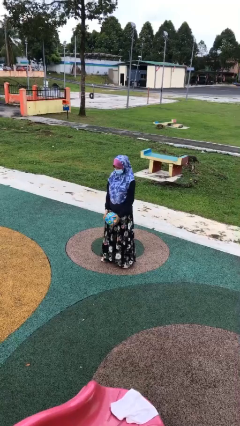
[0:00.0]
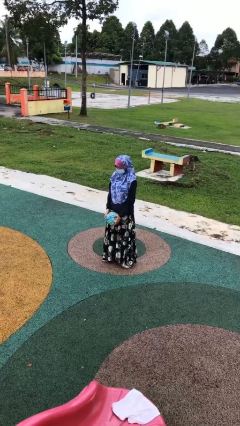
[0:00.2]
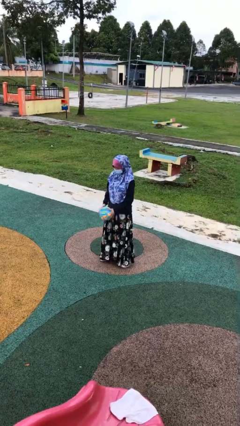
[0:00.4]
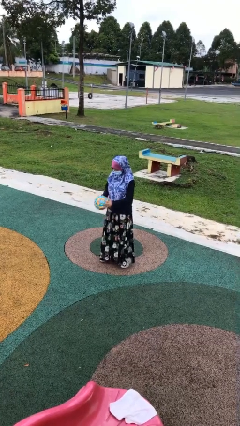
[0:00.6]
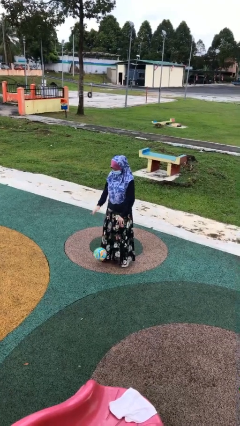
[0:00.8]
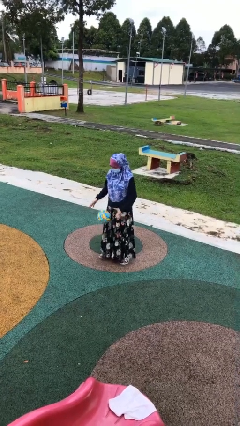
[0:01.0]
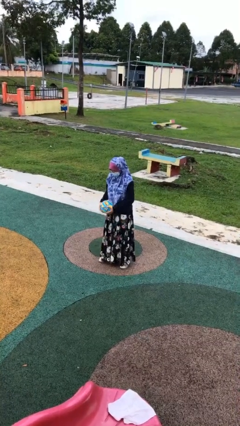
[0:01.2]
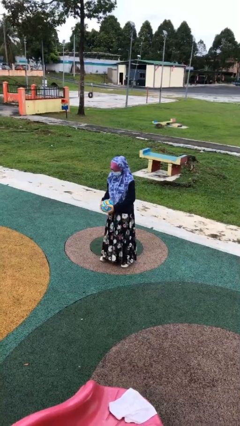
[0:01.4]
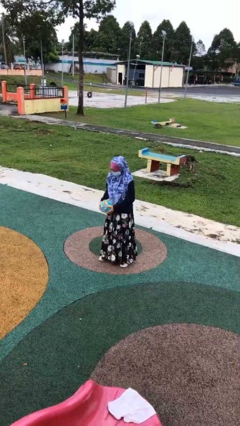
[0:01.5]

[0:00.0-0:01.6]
person bounces ball on floor

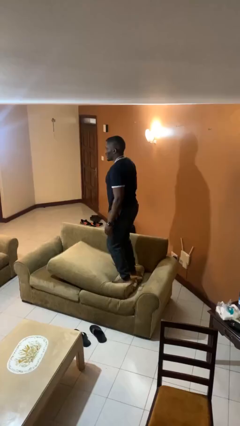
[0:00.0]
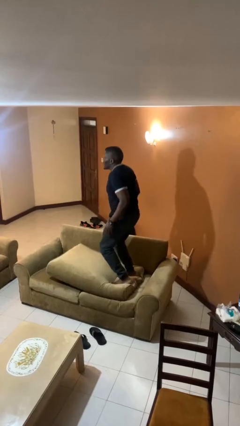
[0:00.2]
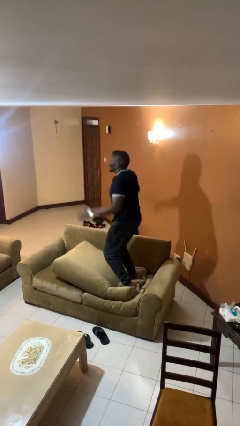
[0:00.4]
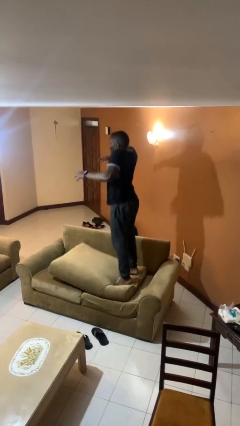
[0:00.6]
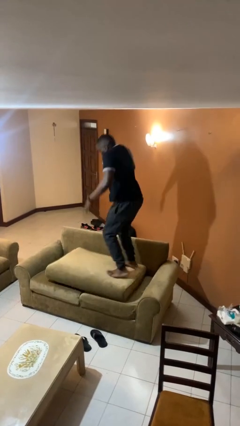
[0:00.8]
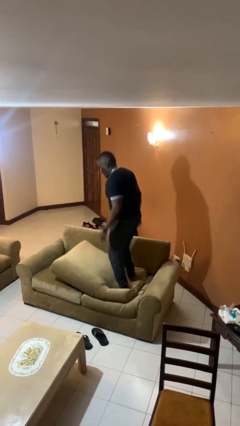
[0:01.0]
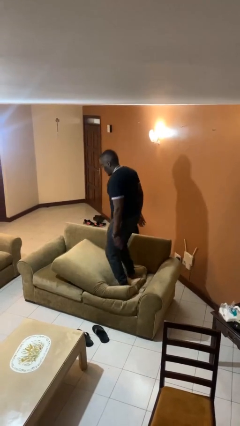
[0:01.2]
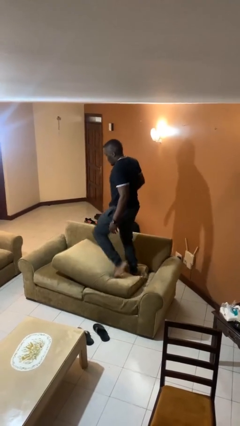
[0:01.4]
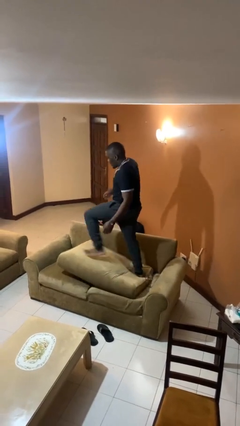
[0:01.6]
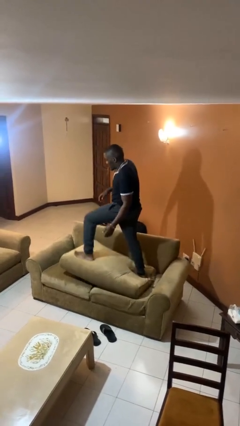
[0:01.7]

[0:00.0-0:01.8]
person jumps on couch

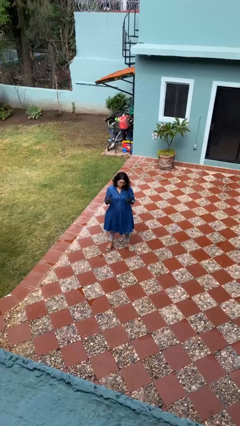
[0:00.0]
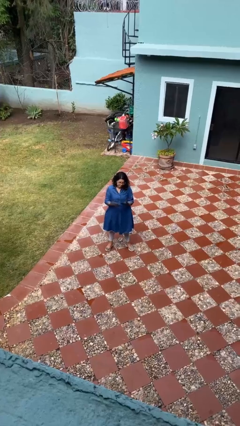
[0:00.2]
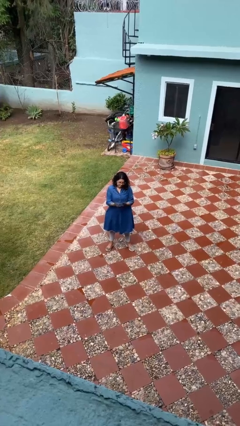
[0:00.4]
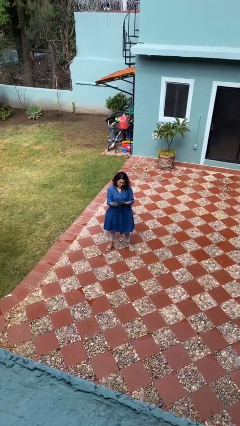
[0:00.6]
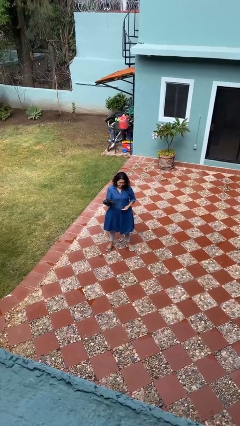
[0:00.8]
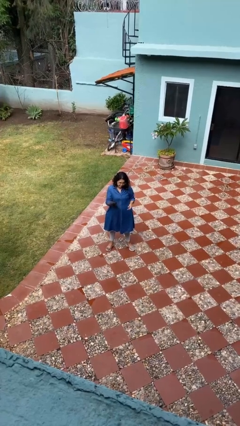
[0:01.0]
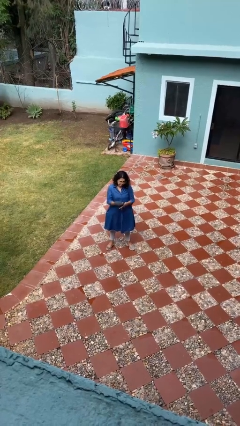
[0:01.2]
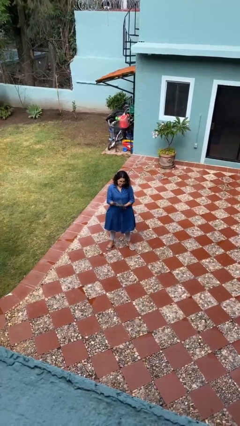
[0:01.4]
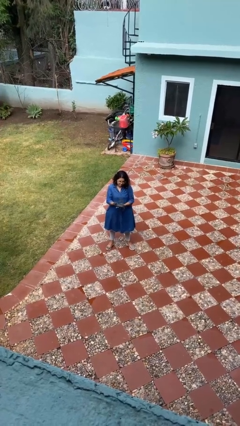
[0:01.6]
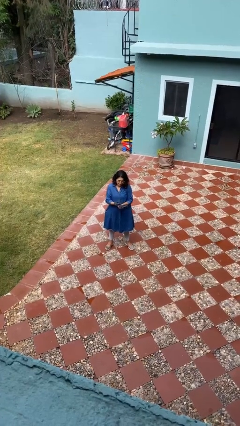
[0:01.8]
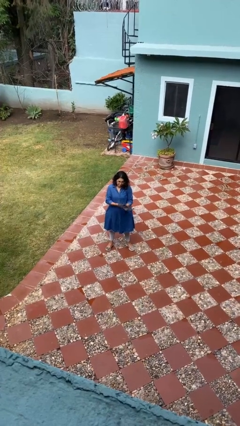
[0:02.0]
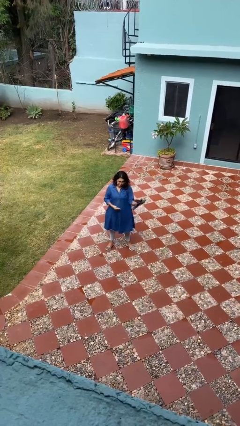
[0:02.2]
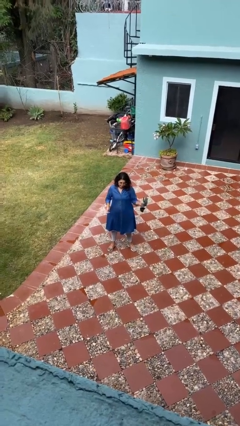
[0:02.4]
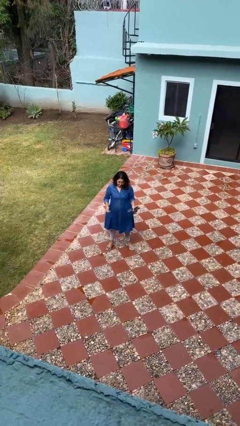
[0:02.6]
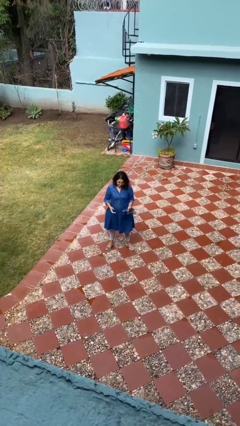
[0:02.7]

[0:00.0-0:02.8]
person takes off gloves

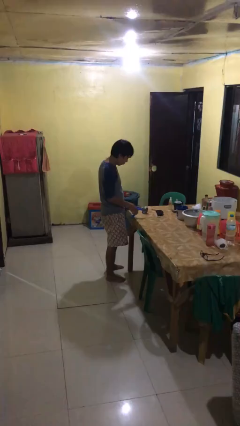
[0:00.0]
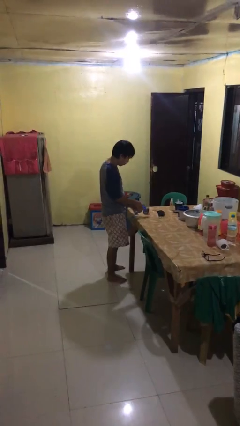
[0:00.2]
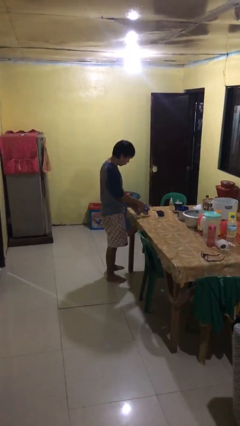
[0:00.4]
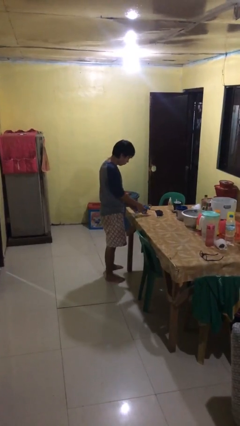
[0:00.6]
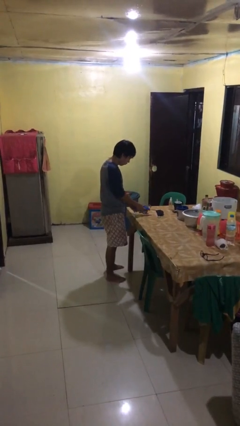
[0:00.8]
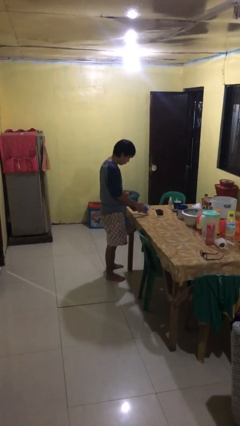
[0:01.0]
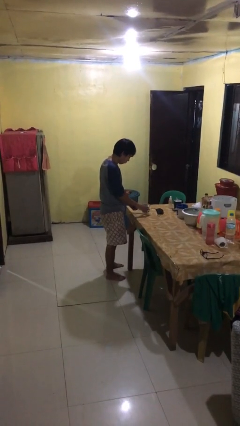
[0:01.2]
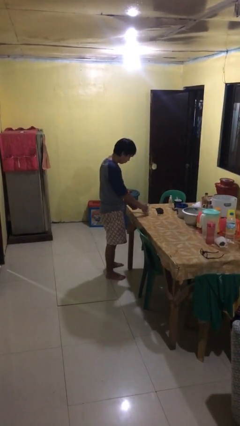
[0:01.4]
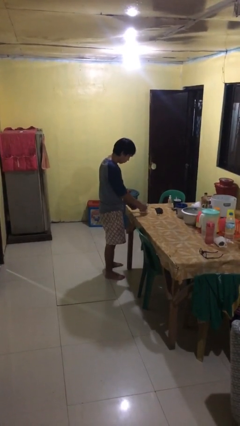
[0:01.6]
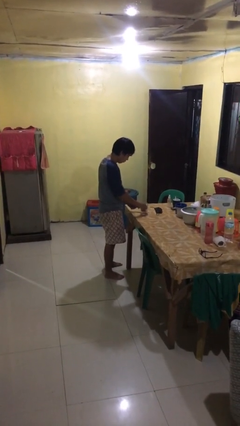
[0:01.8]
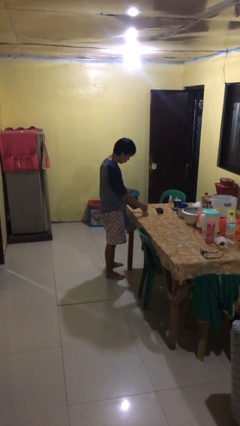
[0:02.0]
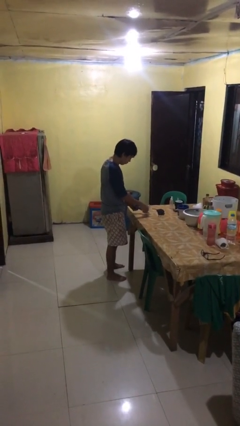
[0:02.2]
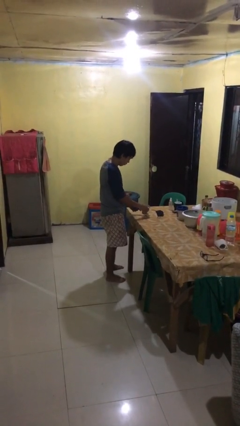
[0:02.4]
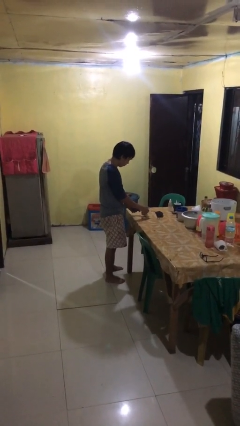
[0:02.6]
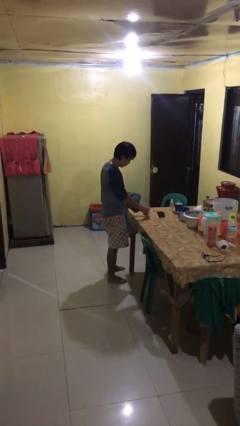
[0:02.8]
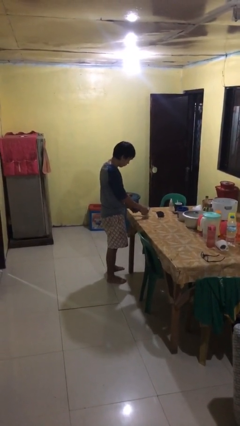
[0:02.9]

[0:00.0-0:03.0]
person opens can with can opener

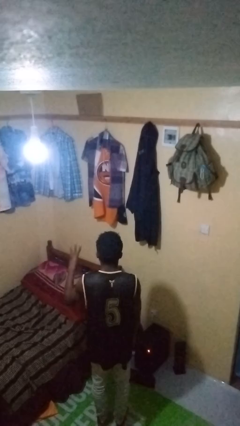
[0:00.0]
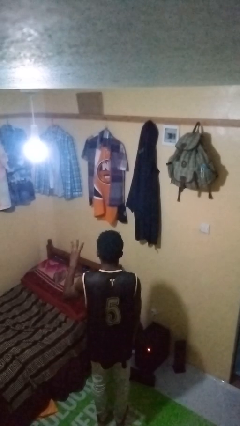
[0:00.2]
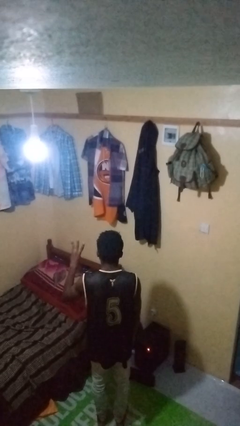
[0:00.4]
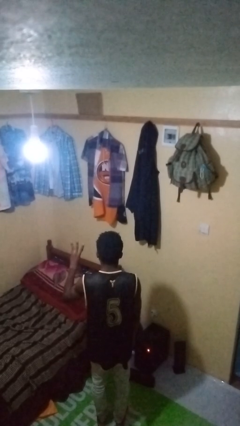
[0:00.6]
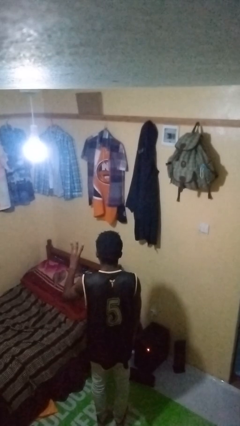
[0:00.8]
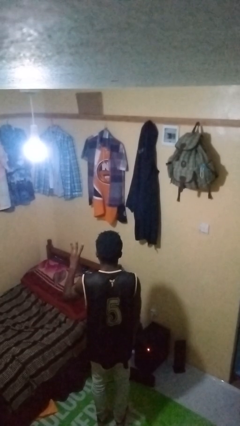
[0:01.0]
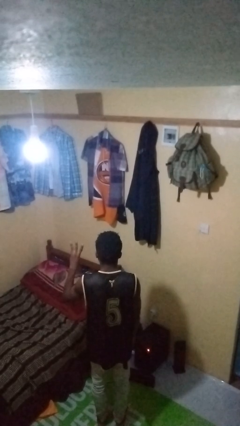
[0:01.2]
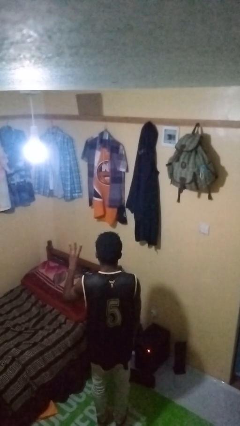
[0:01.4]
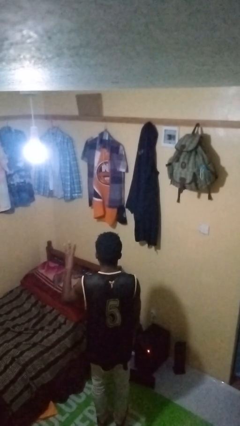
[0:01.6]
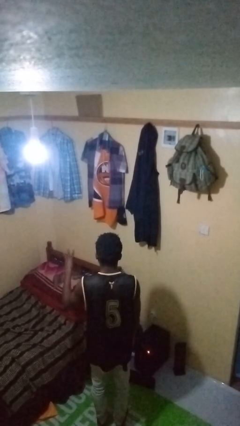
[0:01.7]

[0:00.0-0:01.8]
person gestures number three

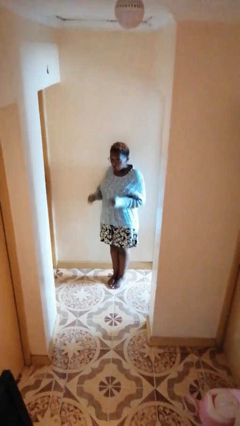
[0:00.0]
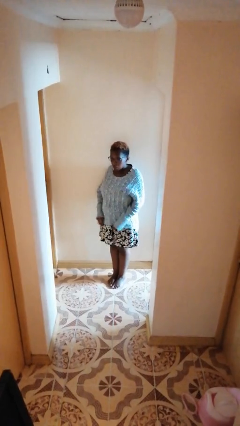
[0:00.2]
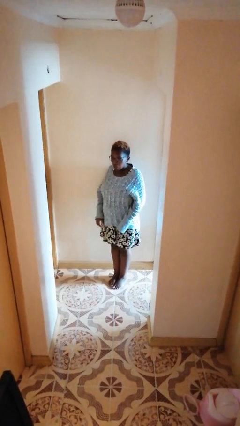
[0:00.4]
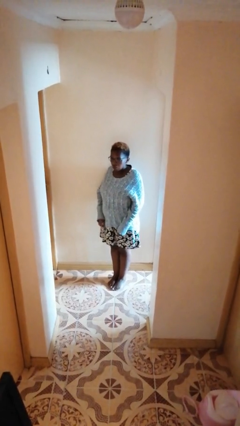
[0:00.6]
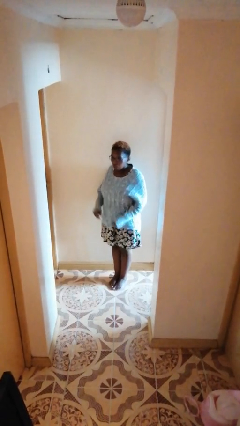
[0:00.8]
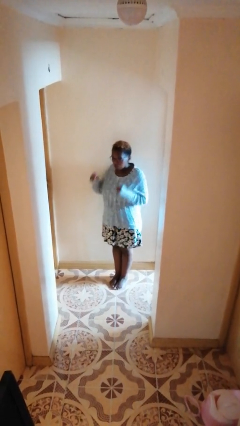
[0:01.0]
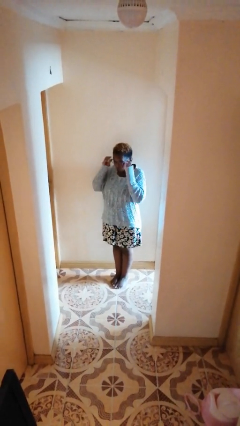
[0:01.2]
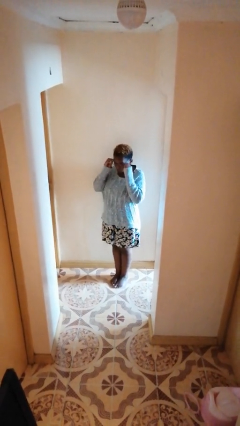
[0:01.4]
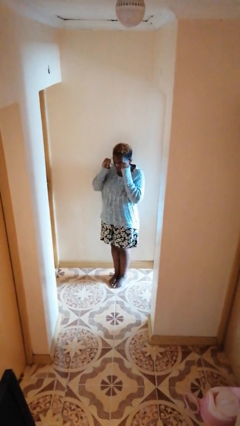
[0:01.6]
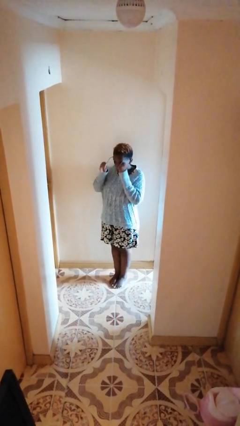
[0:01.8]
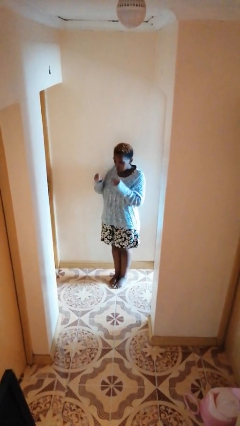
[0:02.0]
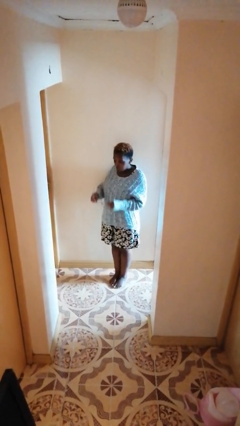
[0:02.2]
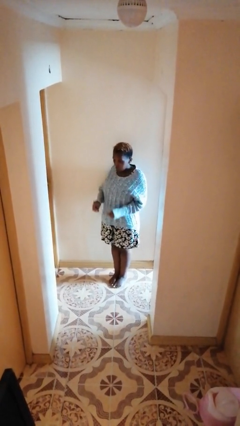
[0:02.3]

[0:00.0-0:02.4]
person takes off glasses

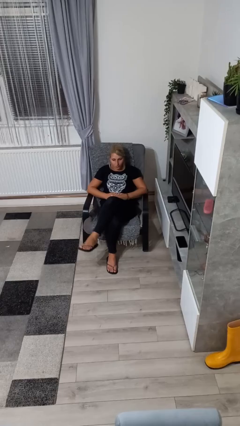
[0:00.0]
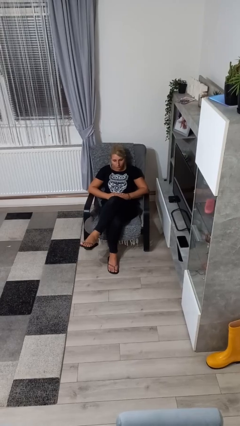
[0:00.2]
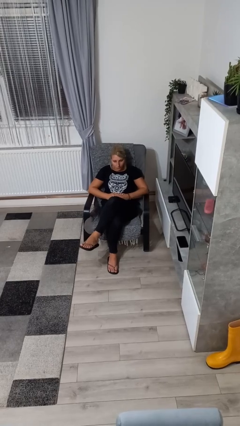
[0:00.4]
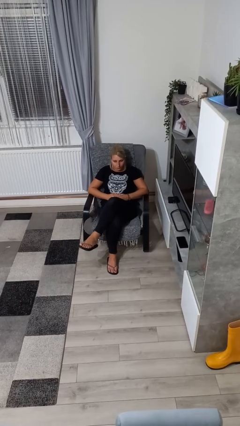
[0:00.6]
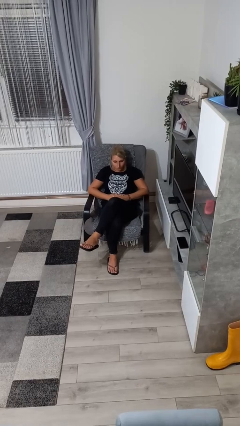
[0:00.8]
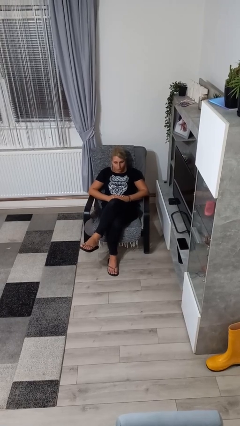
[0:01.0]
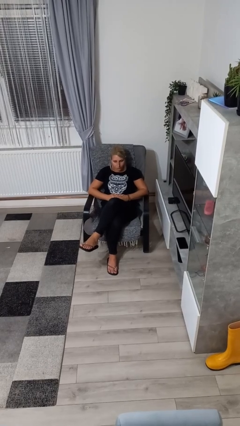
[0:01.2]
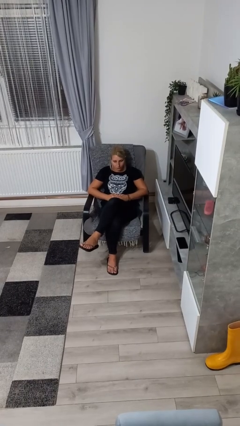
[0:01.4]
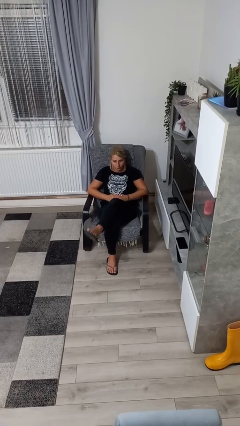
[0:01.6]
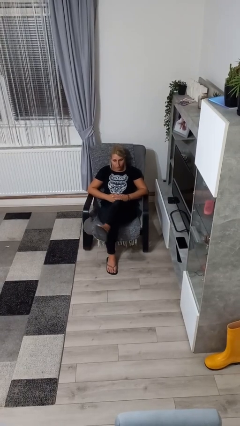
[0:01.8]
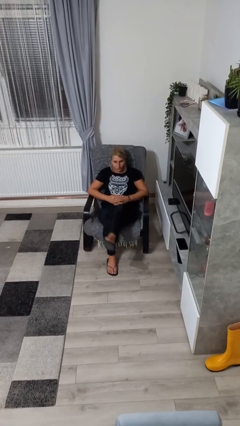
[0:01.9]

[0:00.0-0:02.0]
person crosses legs

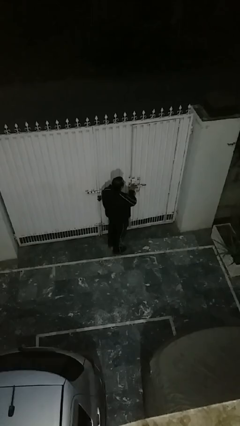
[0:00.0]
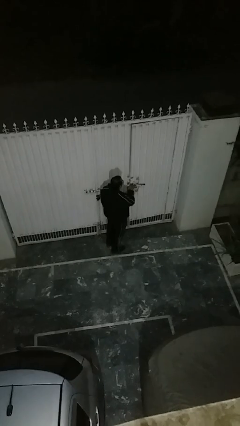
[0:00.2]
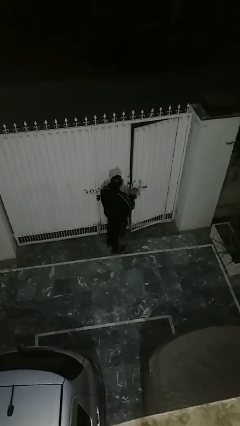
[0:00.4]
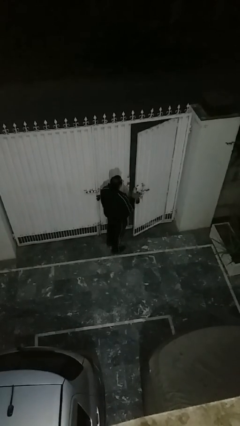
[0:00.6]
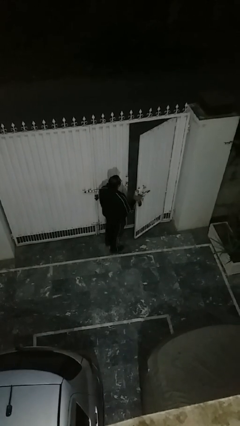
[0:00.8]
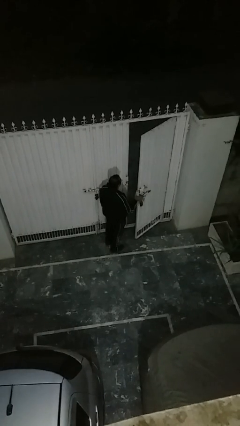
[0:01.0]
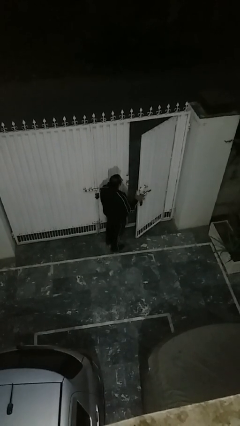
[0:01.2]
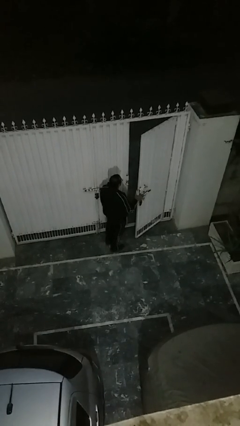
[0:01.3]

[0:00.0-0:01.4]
person opens facility door

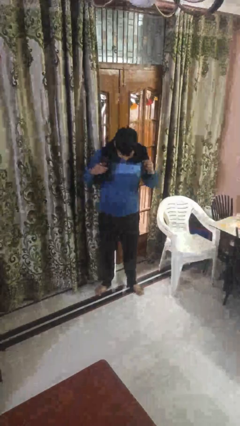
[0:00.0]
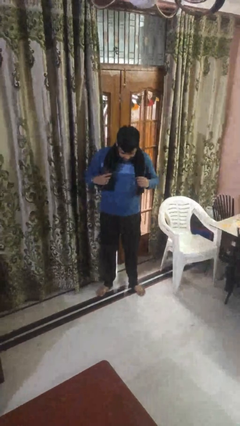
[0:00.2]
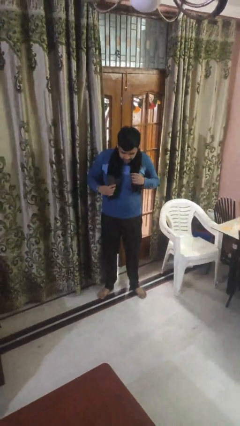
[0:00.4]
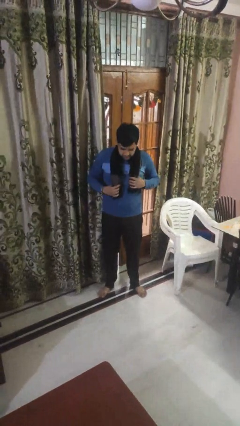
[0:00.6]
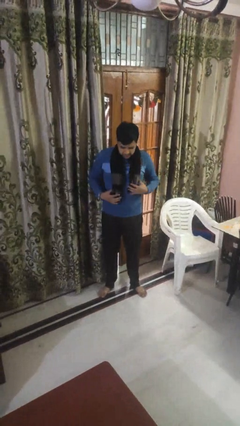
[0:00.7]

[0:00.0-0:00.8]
person puts on scarf
